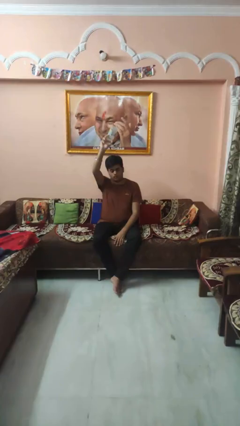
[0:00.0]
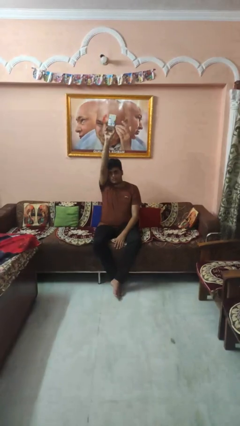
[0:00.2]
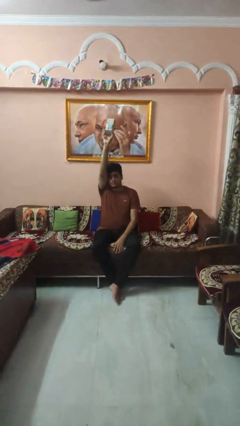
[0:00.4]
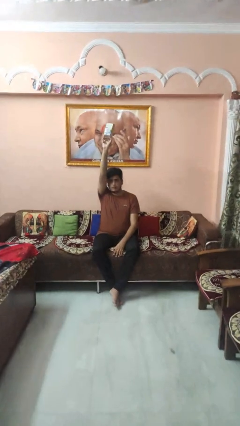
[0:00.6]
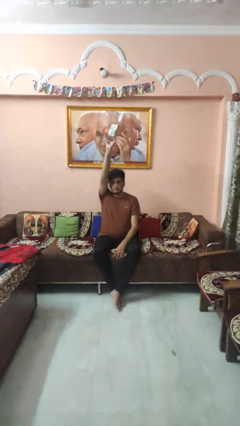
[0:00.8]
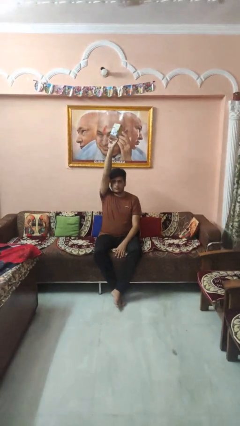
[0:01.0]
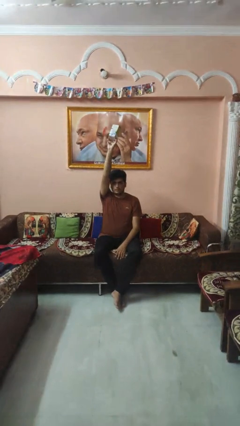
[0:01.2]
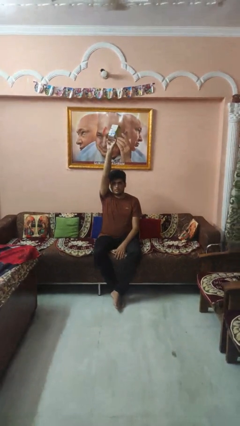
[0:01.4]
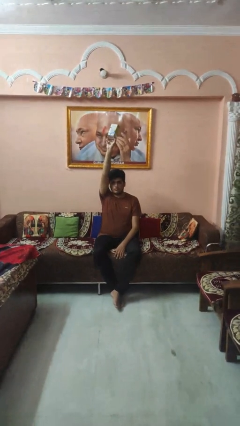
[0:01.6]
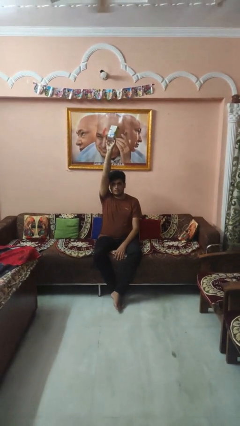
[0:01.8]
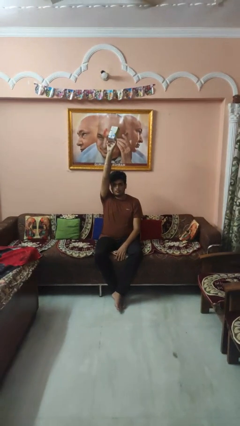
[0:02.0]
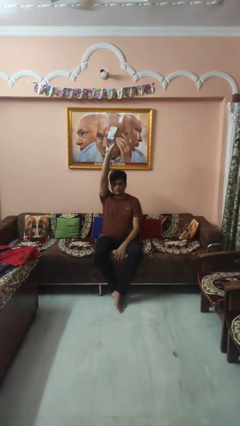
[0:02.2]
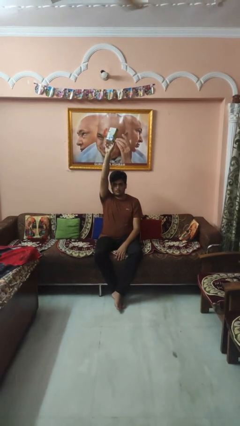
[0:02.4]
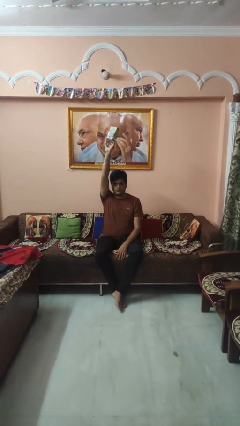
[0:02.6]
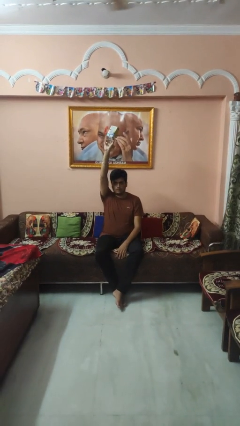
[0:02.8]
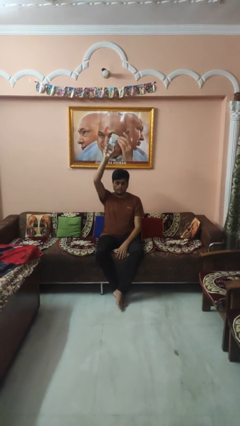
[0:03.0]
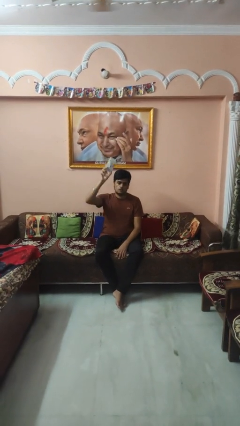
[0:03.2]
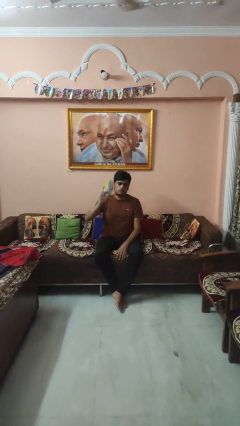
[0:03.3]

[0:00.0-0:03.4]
person holds object above head

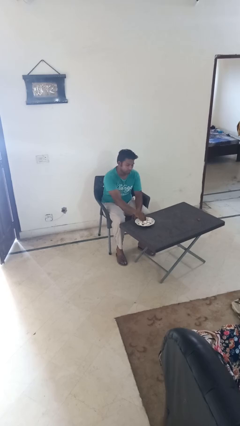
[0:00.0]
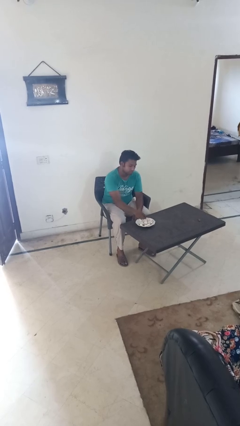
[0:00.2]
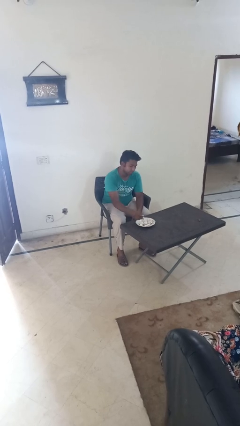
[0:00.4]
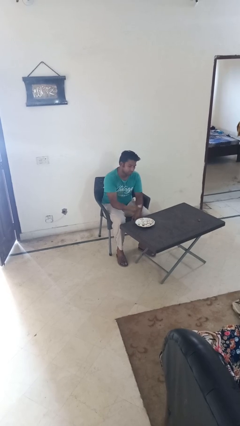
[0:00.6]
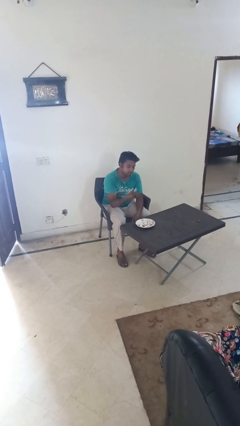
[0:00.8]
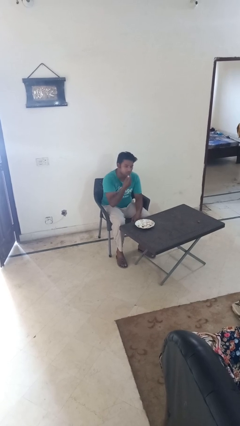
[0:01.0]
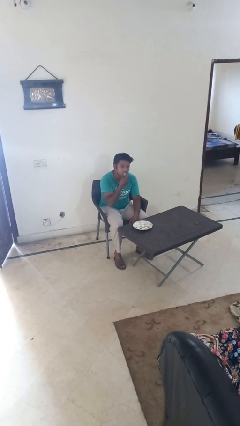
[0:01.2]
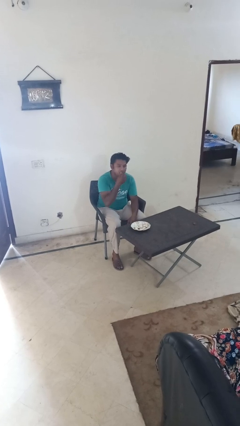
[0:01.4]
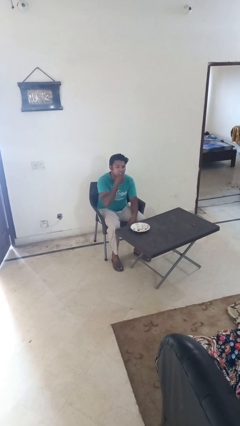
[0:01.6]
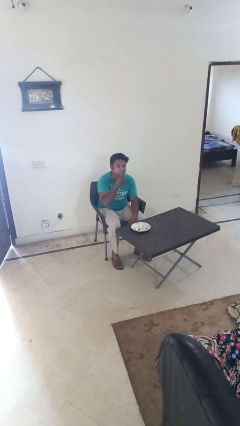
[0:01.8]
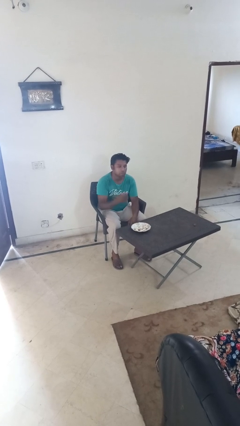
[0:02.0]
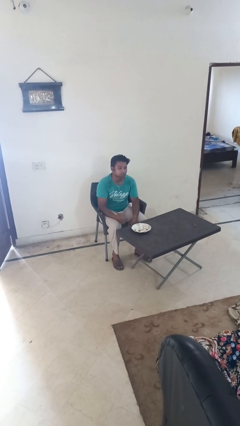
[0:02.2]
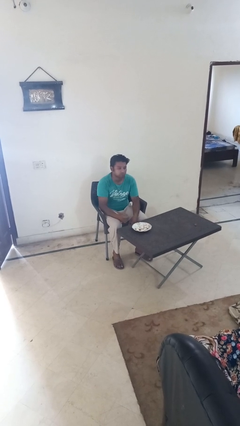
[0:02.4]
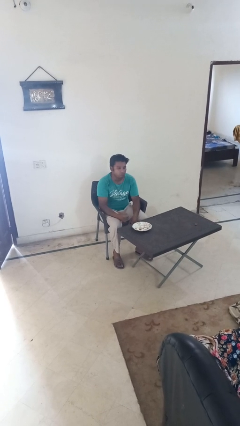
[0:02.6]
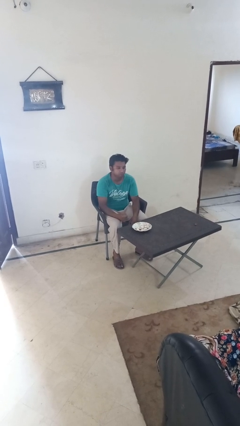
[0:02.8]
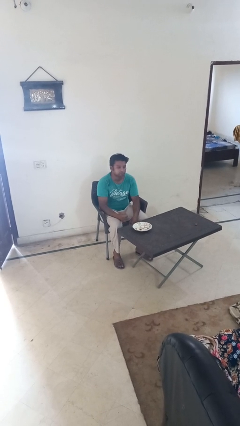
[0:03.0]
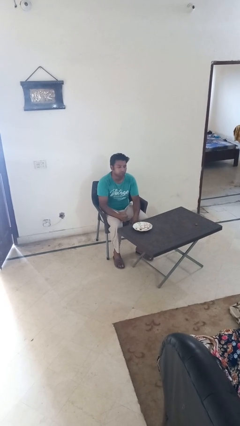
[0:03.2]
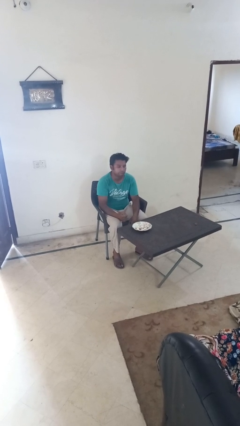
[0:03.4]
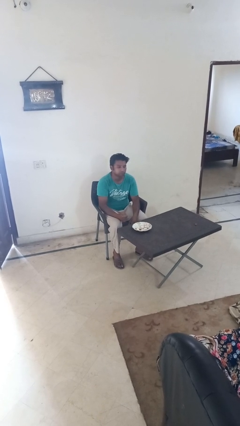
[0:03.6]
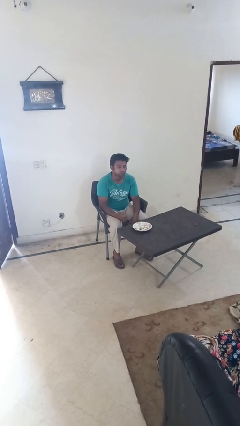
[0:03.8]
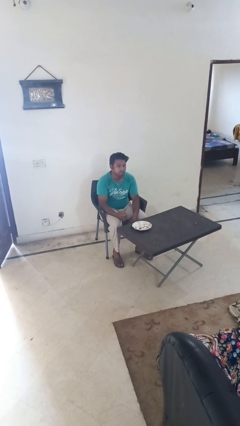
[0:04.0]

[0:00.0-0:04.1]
person eats with hands

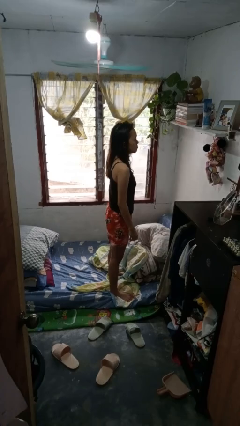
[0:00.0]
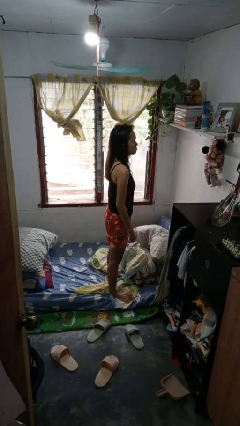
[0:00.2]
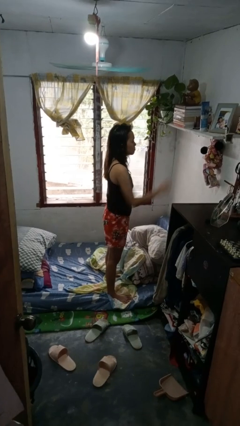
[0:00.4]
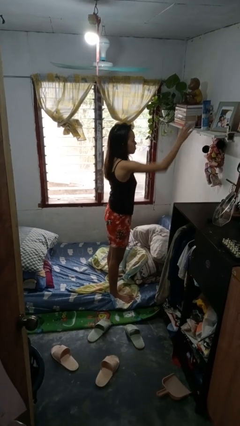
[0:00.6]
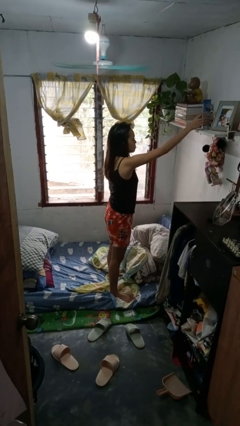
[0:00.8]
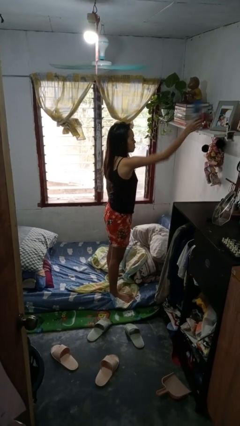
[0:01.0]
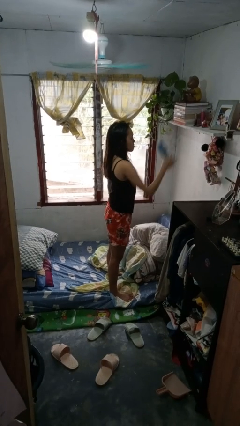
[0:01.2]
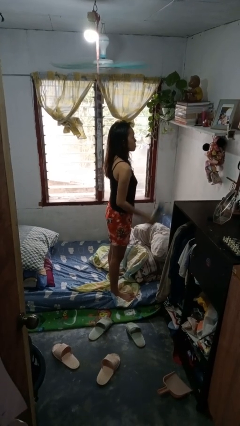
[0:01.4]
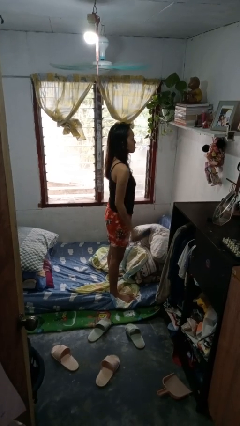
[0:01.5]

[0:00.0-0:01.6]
person picks up object from shelf

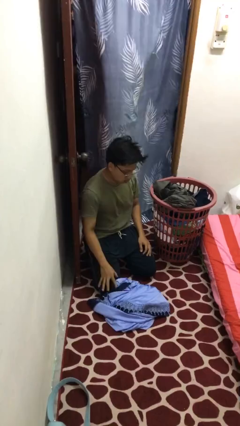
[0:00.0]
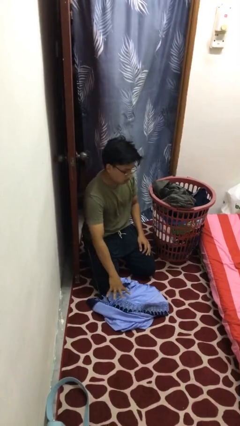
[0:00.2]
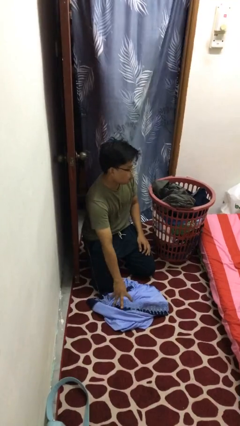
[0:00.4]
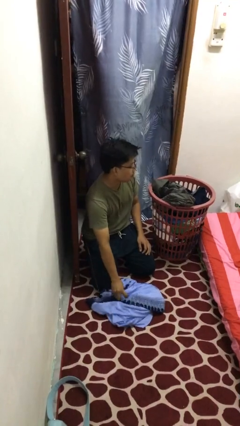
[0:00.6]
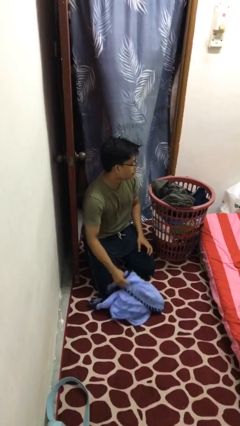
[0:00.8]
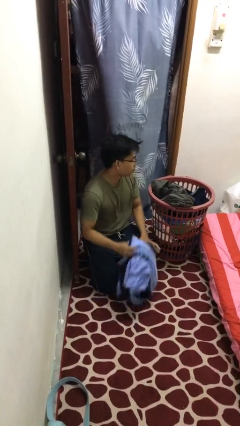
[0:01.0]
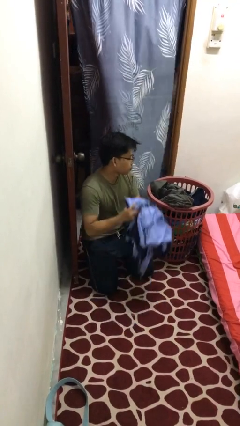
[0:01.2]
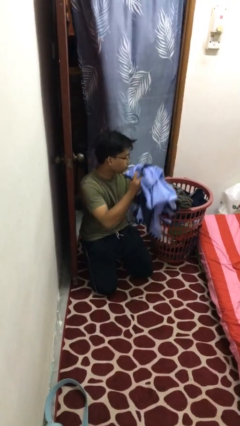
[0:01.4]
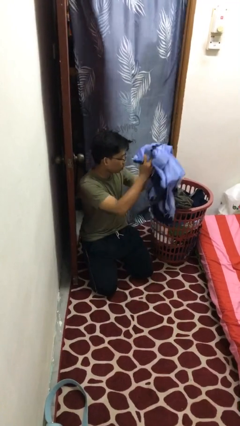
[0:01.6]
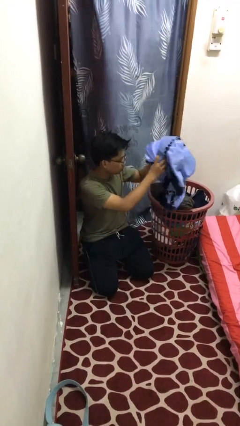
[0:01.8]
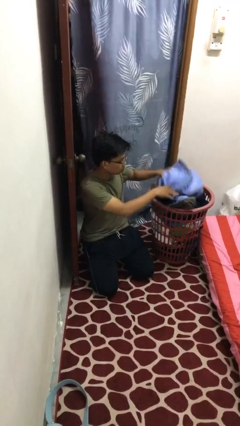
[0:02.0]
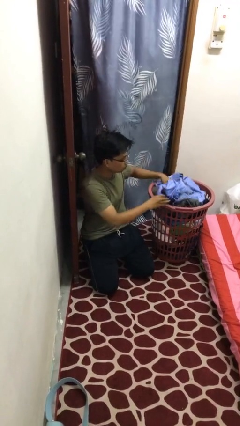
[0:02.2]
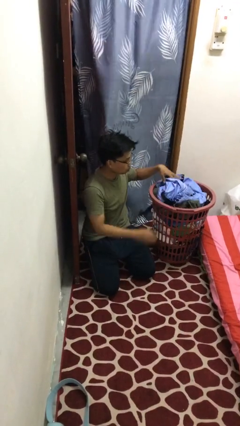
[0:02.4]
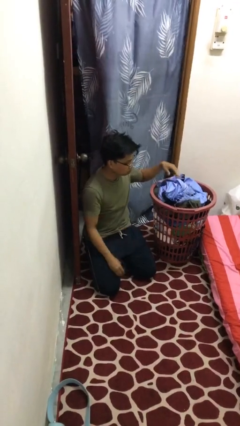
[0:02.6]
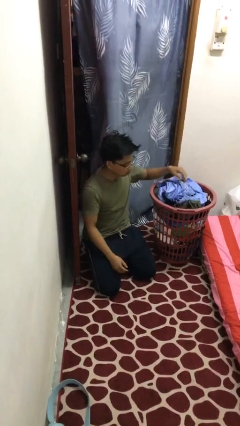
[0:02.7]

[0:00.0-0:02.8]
person puts object into basket

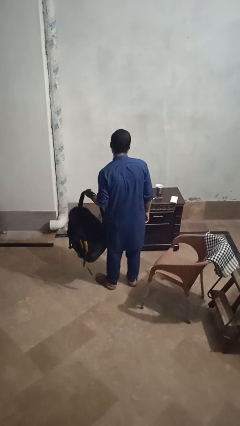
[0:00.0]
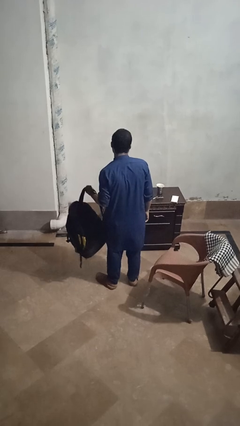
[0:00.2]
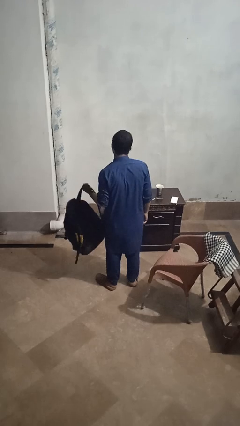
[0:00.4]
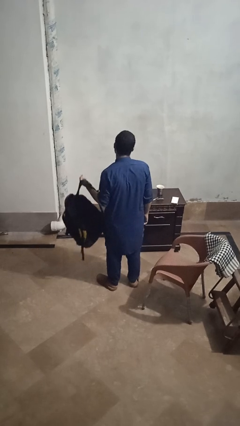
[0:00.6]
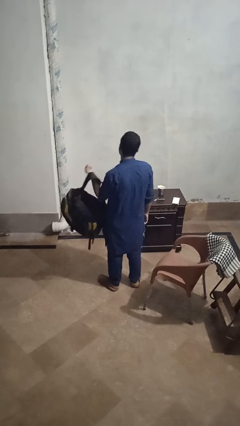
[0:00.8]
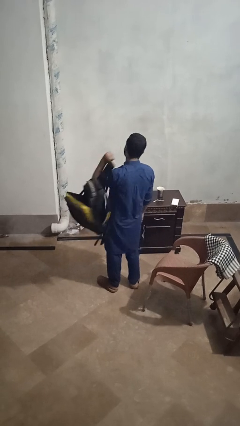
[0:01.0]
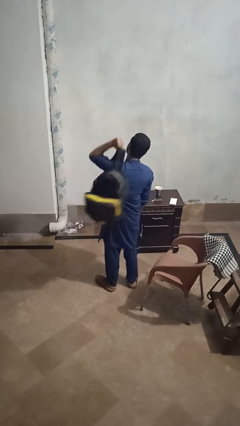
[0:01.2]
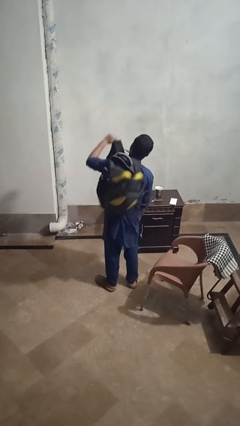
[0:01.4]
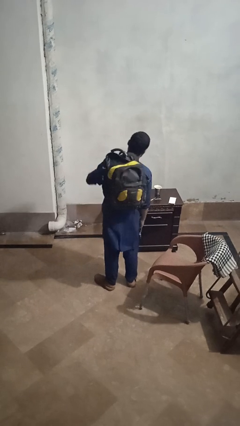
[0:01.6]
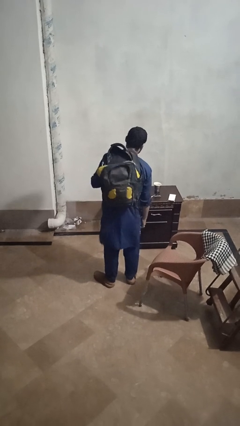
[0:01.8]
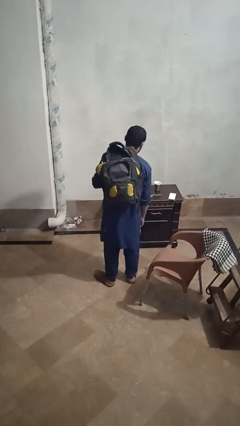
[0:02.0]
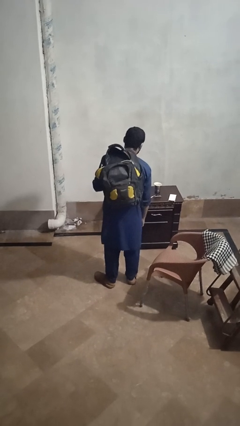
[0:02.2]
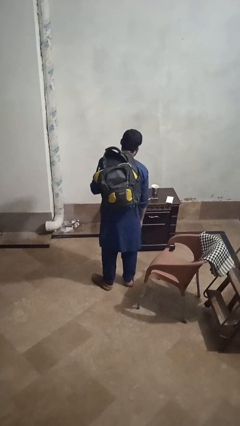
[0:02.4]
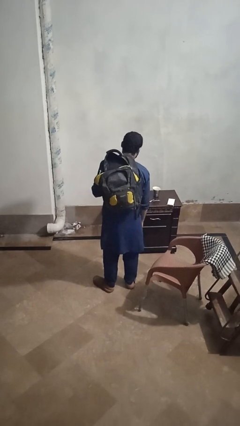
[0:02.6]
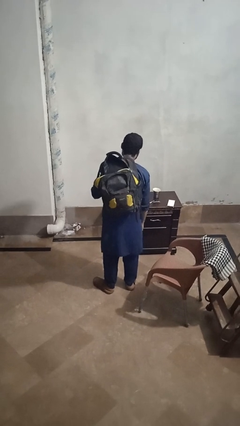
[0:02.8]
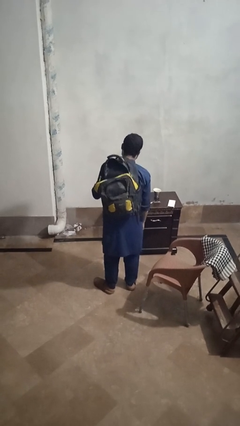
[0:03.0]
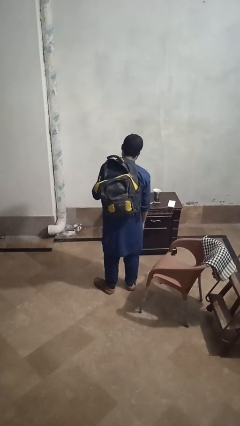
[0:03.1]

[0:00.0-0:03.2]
person puts on backpack

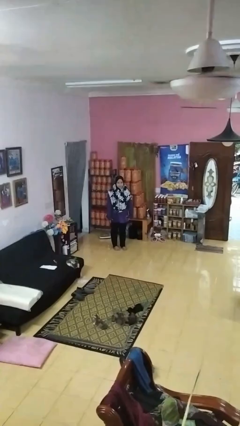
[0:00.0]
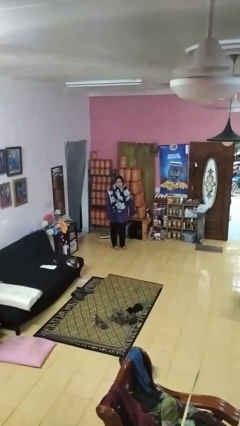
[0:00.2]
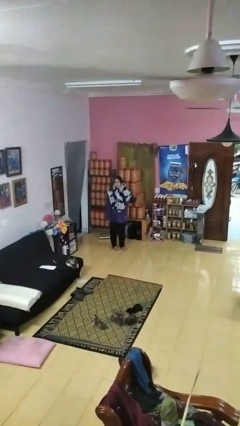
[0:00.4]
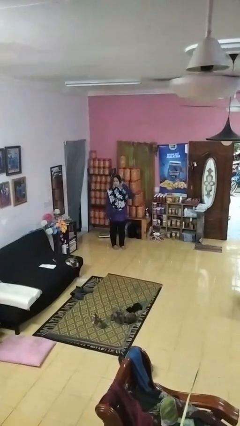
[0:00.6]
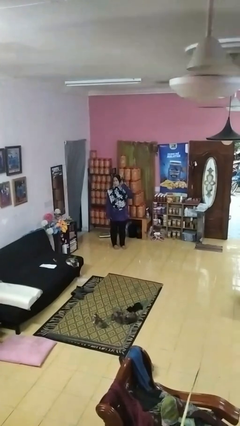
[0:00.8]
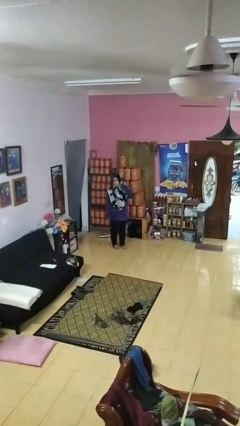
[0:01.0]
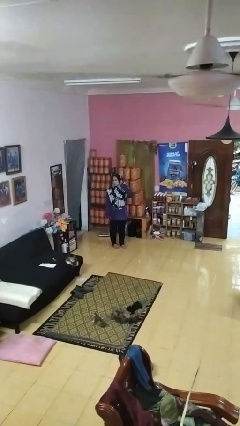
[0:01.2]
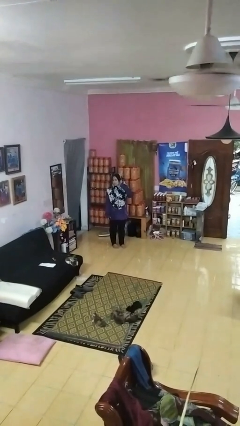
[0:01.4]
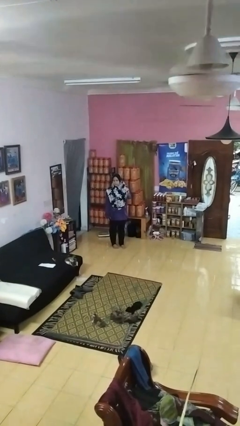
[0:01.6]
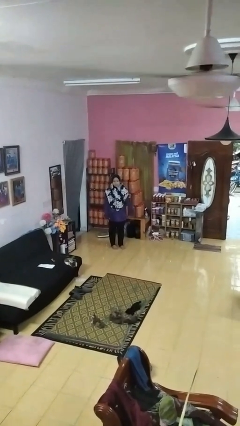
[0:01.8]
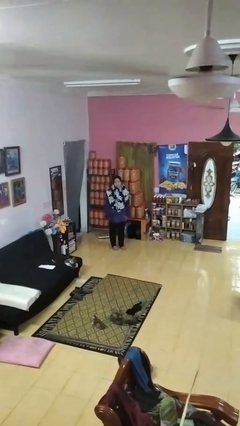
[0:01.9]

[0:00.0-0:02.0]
person gestures listen closely

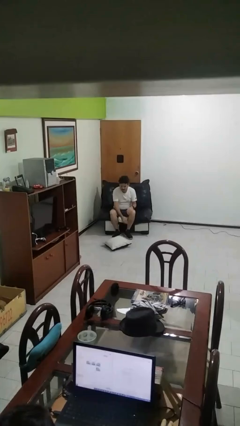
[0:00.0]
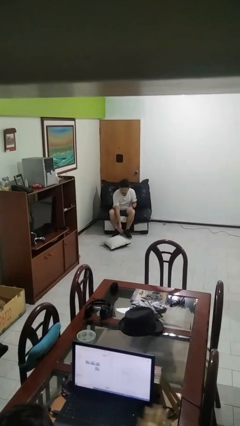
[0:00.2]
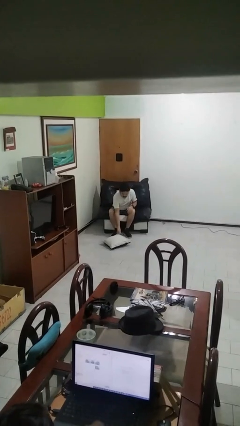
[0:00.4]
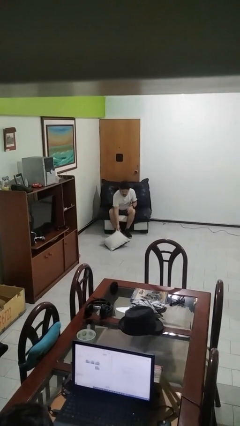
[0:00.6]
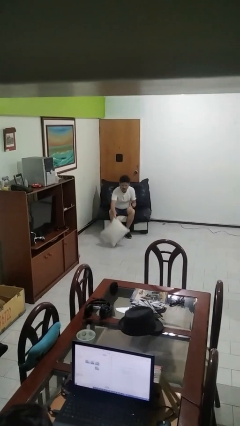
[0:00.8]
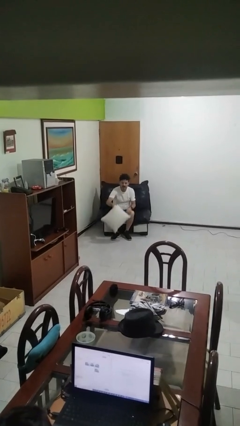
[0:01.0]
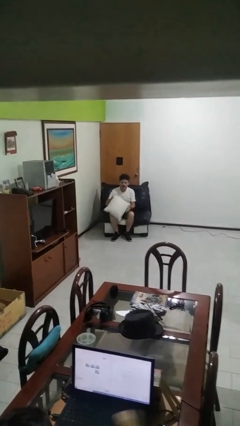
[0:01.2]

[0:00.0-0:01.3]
person picks up object from floor
